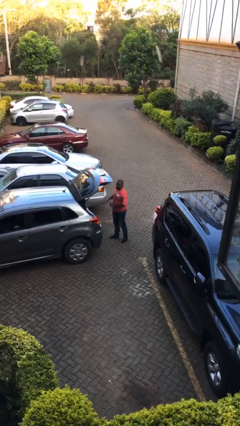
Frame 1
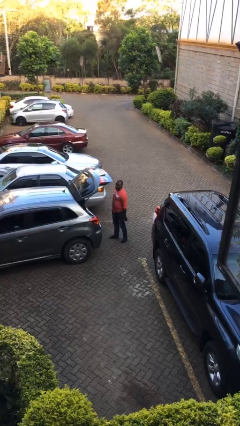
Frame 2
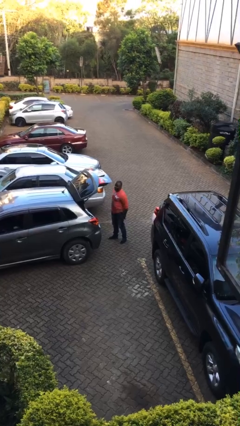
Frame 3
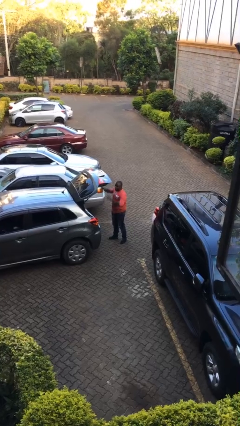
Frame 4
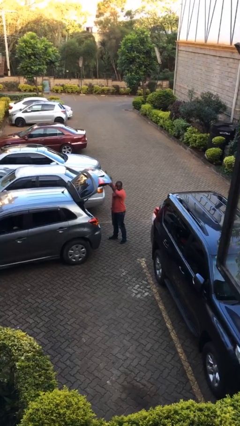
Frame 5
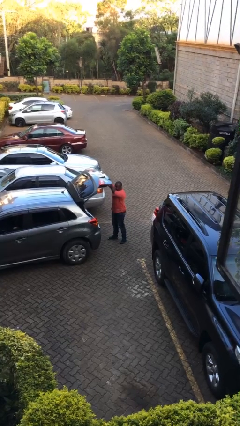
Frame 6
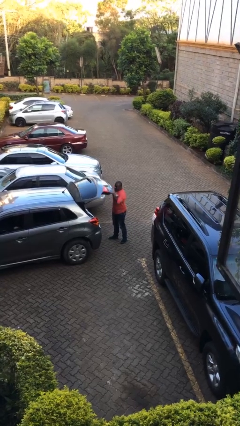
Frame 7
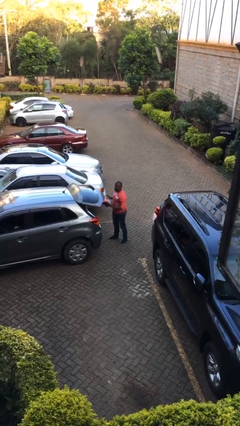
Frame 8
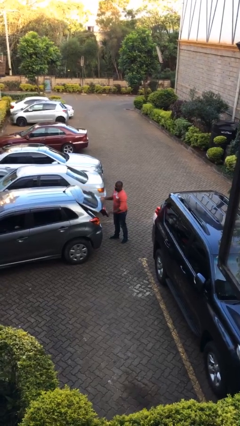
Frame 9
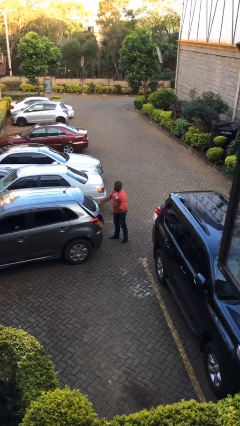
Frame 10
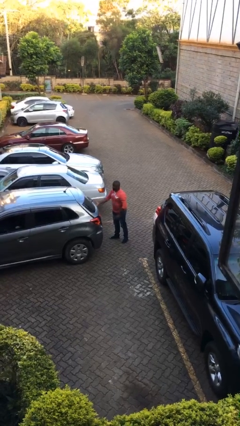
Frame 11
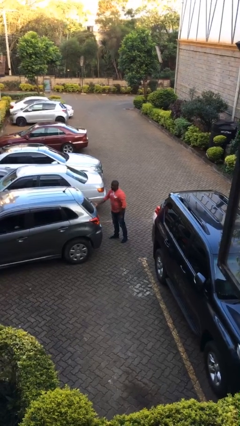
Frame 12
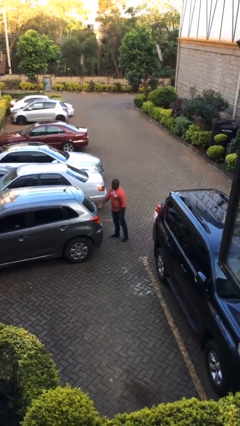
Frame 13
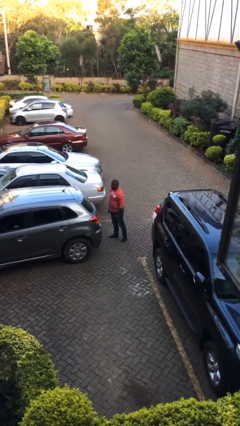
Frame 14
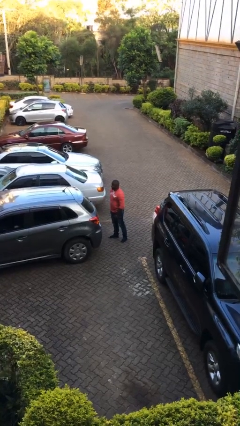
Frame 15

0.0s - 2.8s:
person closes car trunk

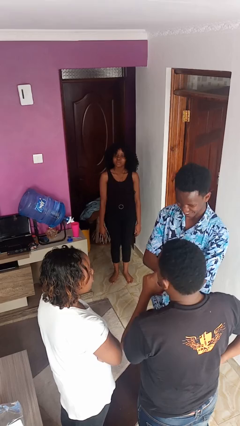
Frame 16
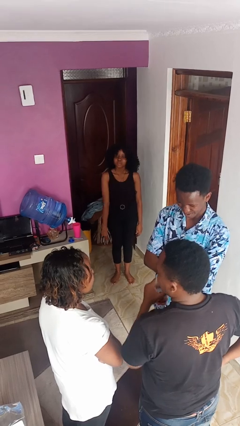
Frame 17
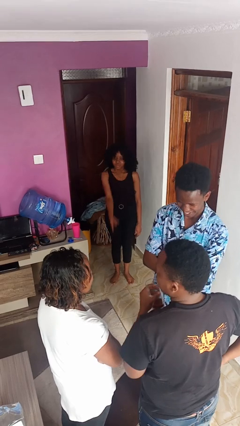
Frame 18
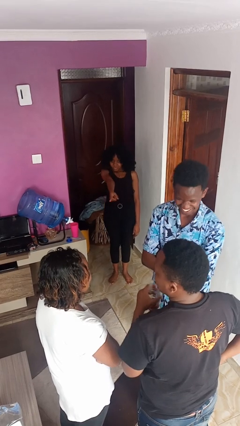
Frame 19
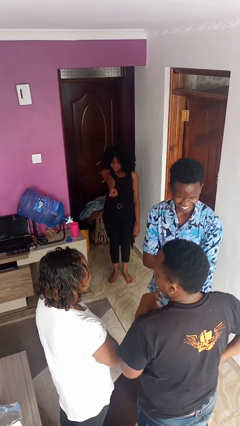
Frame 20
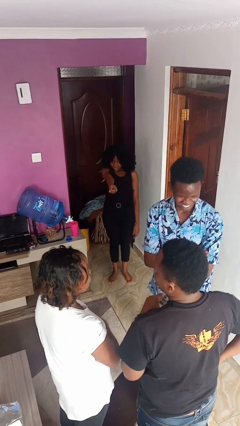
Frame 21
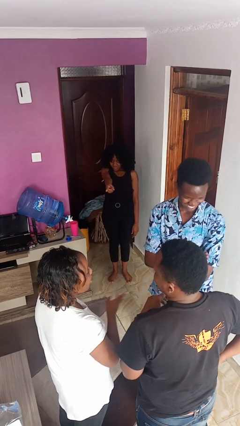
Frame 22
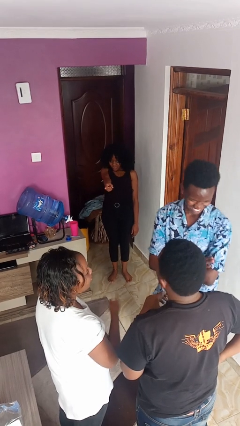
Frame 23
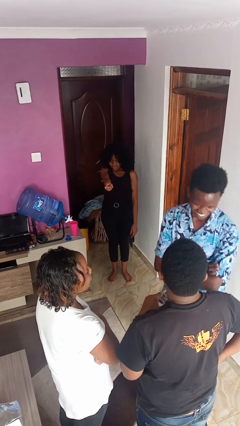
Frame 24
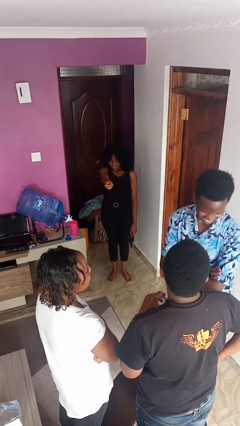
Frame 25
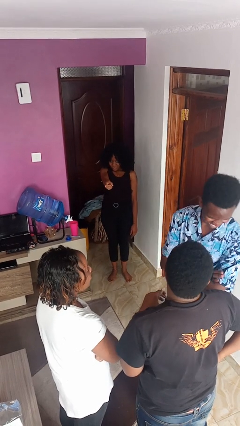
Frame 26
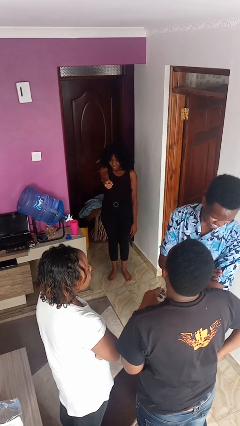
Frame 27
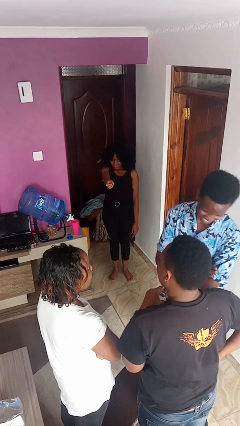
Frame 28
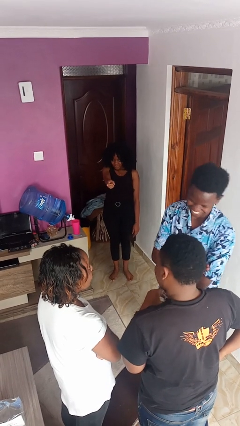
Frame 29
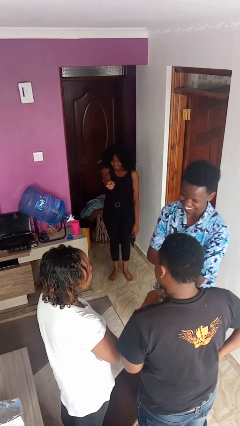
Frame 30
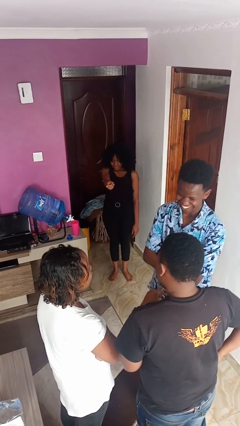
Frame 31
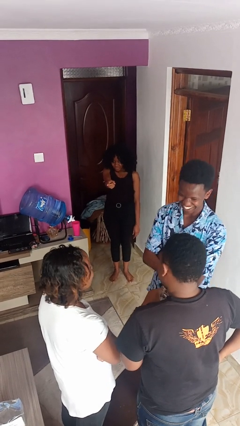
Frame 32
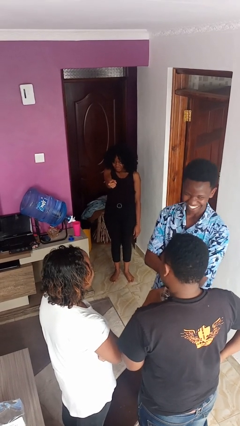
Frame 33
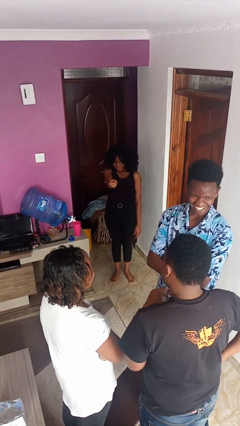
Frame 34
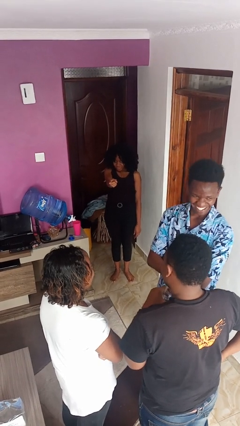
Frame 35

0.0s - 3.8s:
person points at person

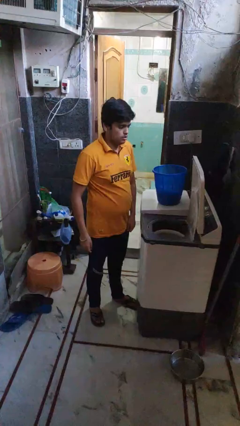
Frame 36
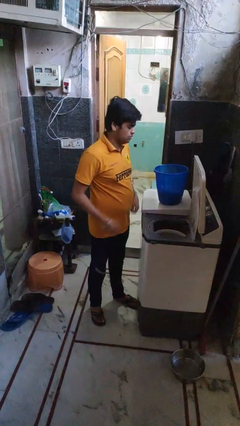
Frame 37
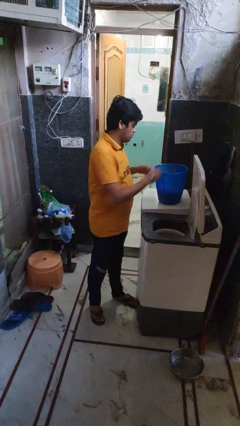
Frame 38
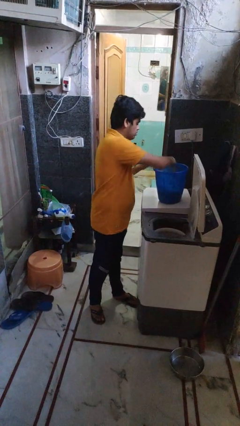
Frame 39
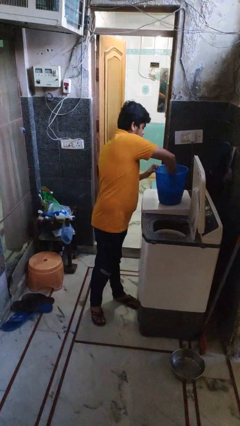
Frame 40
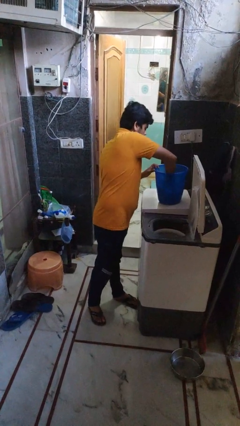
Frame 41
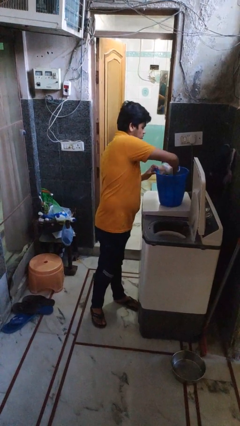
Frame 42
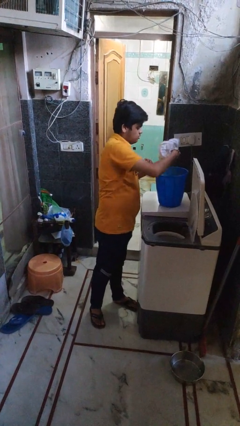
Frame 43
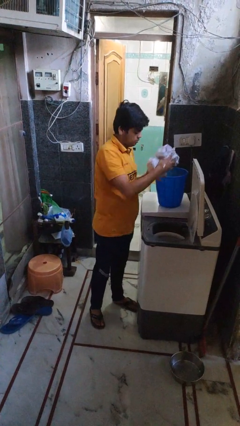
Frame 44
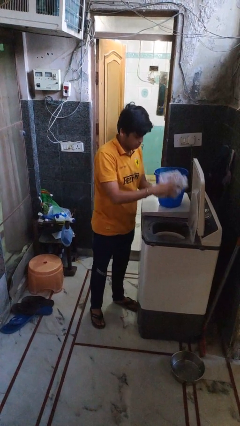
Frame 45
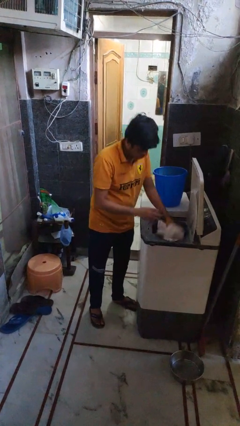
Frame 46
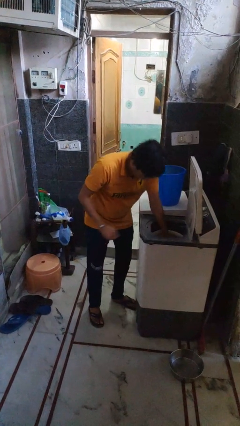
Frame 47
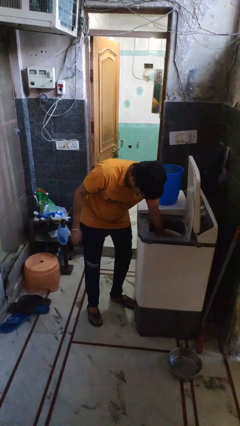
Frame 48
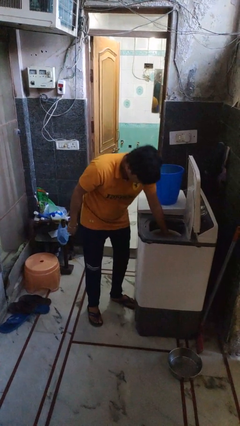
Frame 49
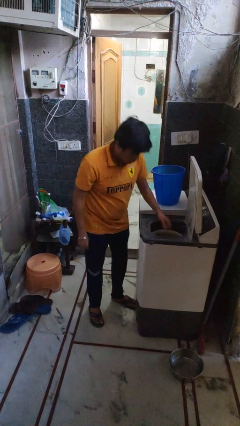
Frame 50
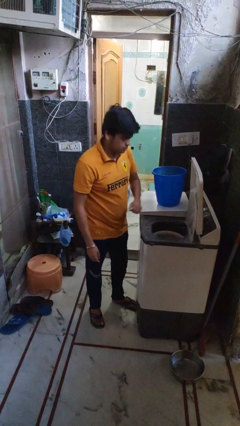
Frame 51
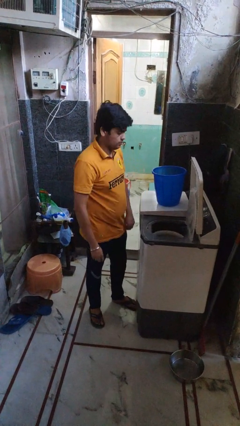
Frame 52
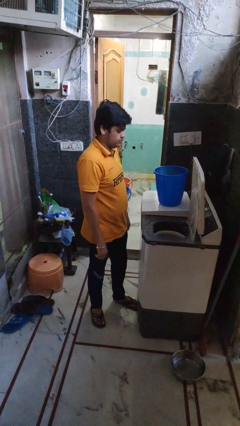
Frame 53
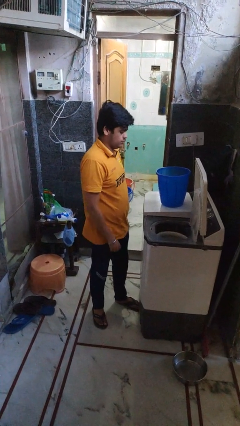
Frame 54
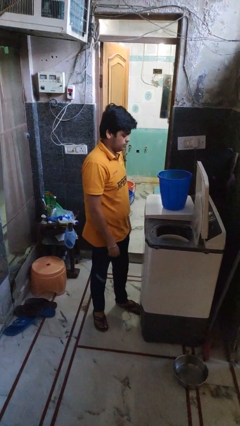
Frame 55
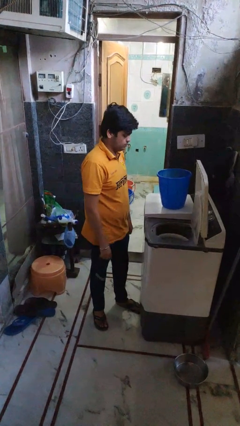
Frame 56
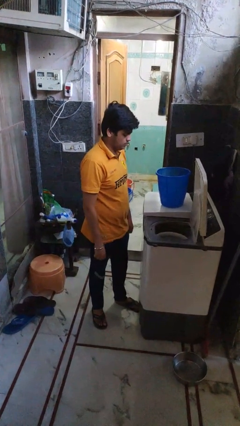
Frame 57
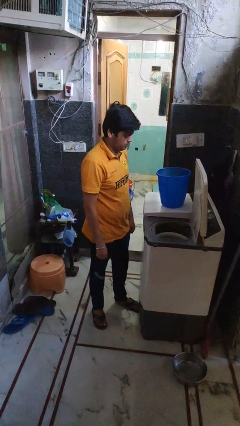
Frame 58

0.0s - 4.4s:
person loads clotheswasher

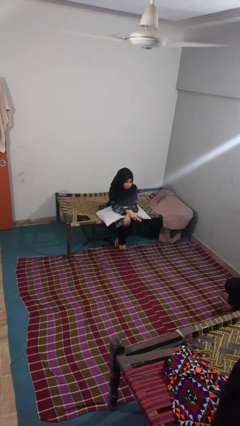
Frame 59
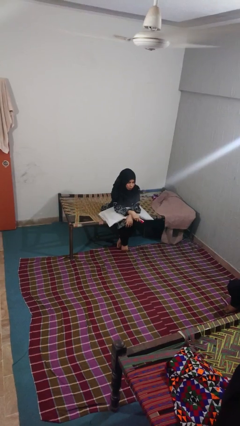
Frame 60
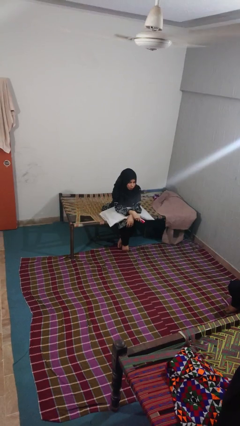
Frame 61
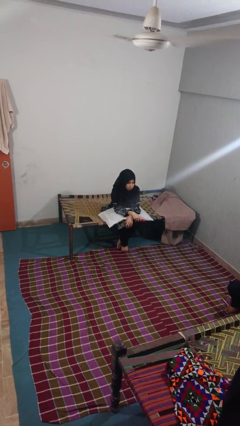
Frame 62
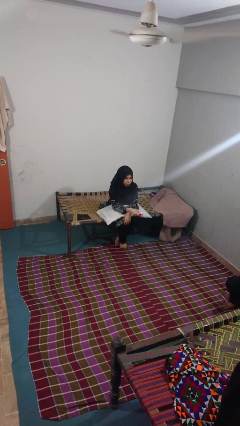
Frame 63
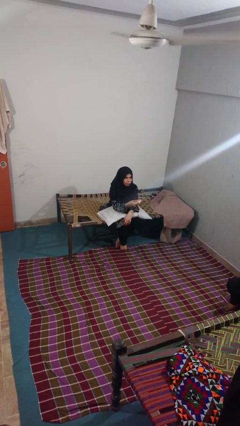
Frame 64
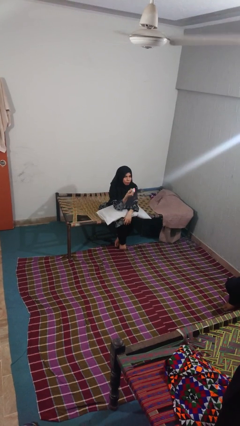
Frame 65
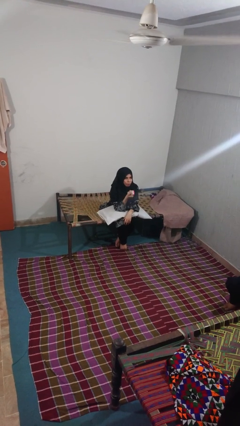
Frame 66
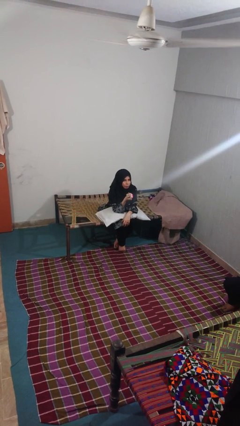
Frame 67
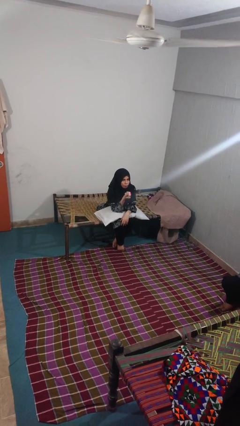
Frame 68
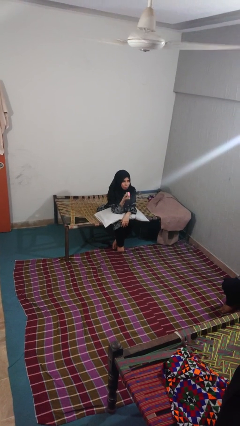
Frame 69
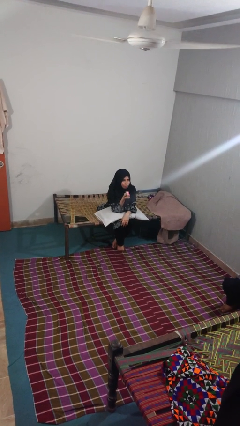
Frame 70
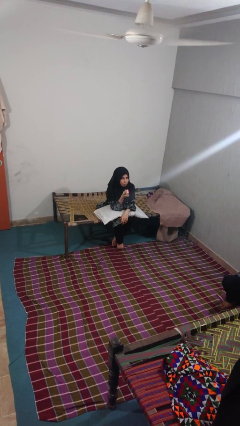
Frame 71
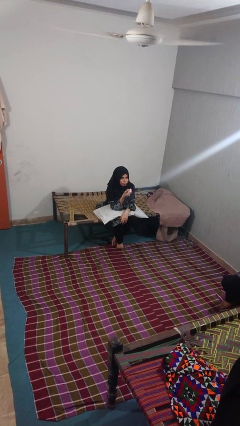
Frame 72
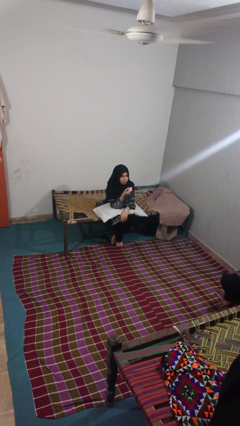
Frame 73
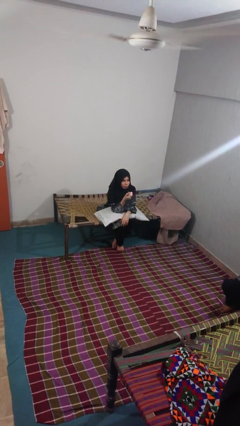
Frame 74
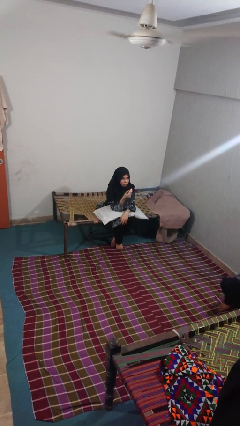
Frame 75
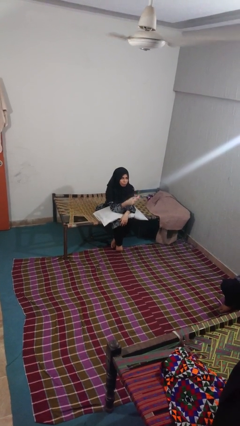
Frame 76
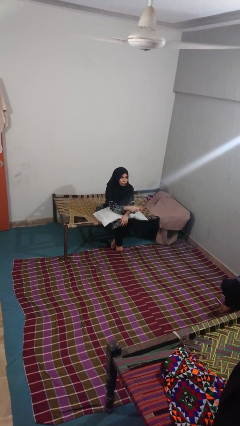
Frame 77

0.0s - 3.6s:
person uses television remote

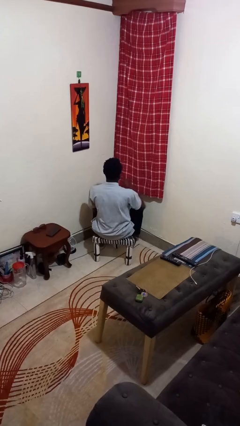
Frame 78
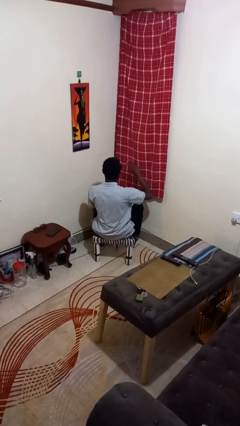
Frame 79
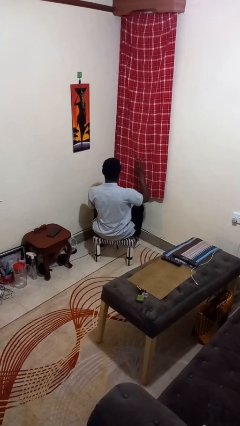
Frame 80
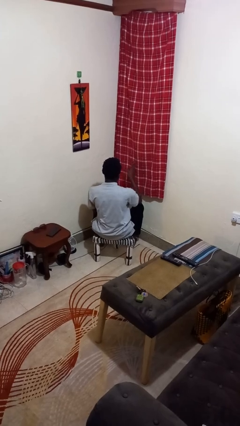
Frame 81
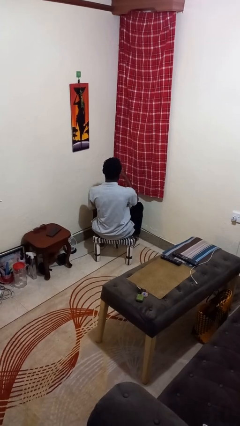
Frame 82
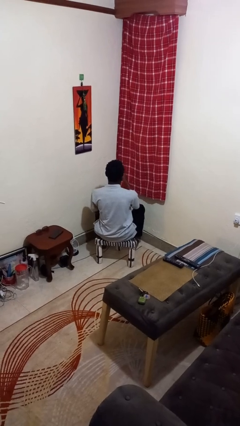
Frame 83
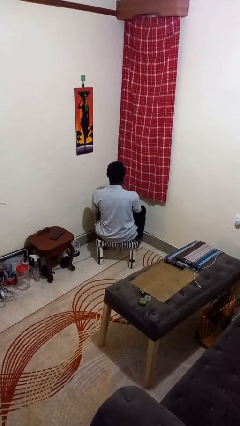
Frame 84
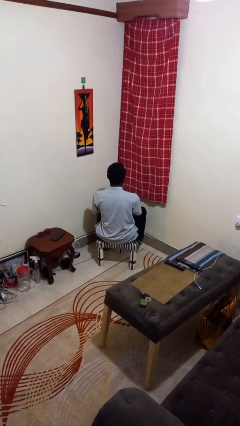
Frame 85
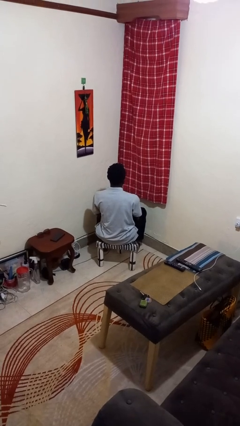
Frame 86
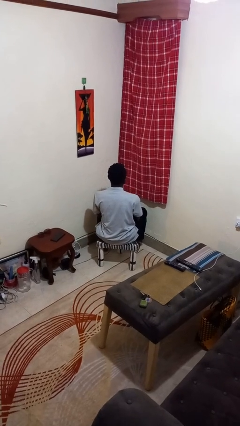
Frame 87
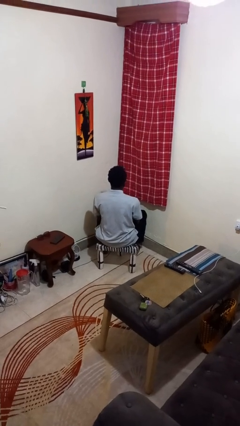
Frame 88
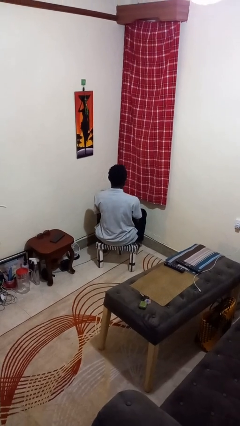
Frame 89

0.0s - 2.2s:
person gestures swipe left

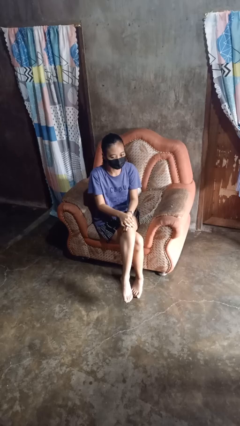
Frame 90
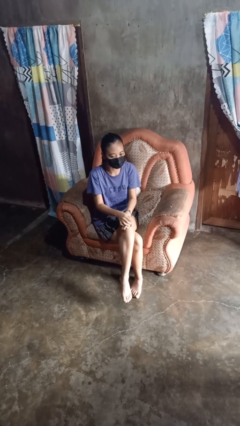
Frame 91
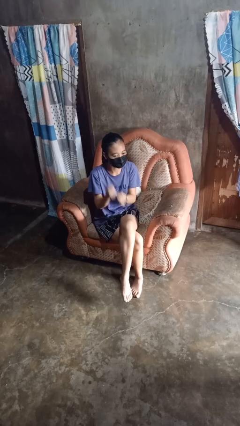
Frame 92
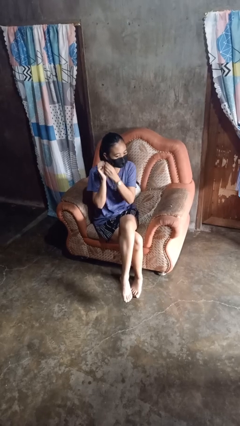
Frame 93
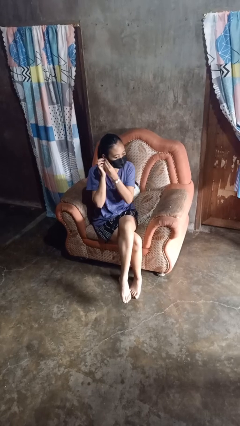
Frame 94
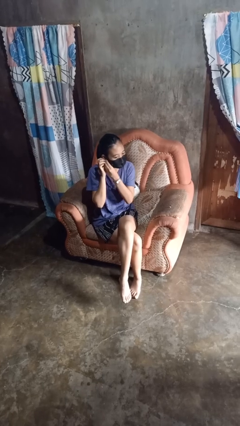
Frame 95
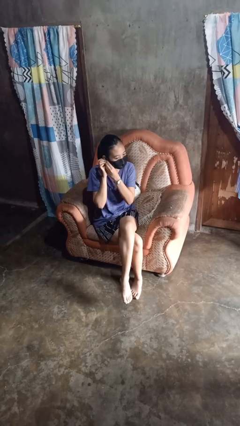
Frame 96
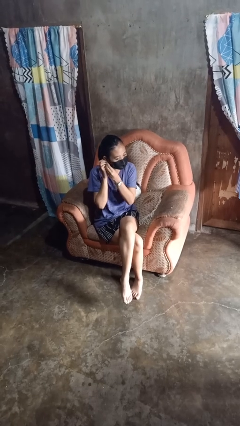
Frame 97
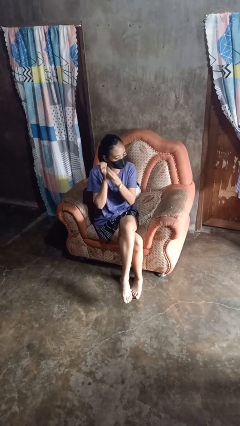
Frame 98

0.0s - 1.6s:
person takes off earrings
